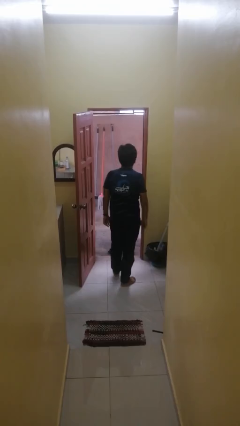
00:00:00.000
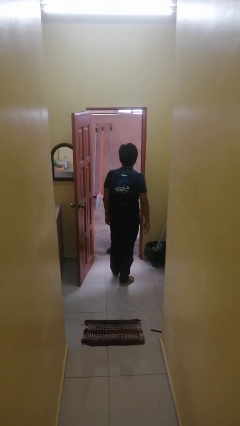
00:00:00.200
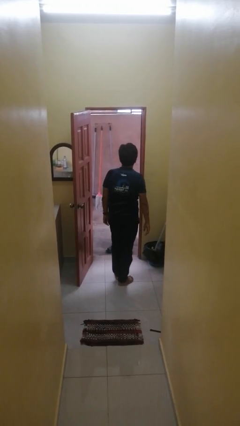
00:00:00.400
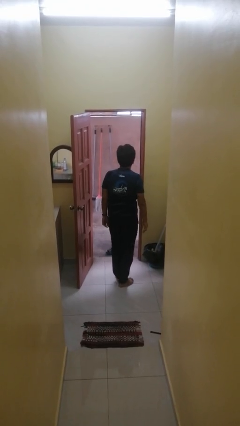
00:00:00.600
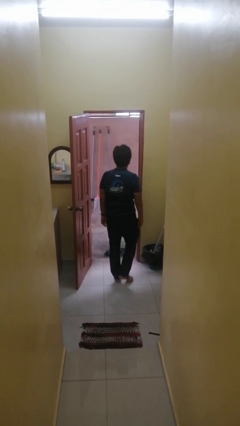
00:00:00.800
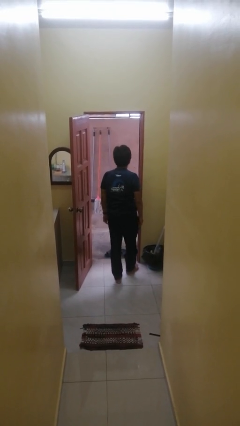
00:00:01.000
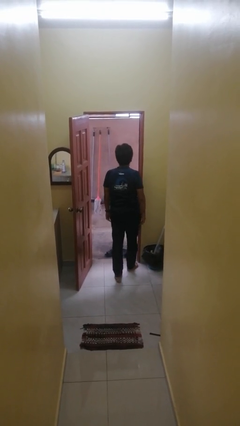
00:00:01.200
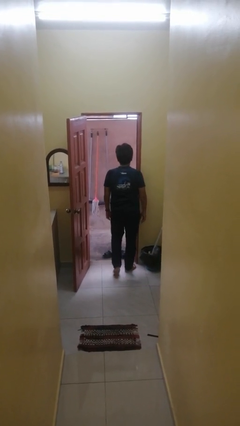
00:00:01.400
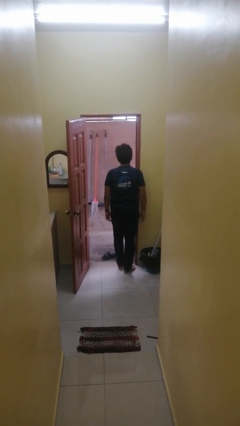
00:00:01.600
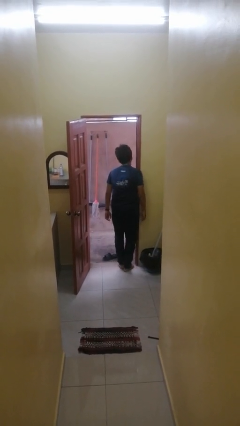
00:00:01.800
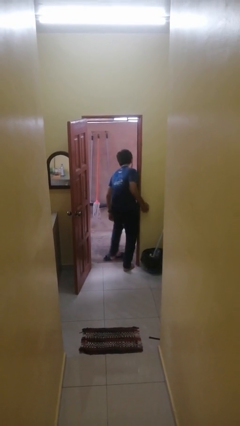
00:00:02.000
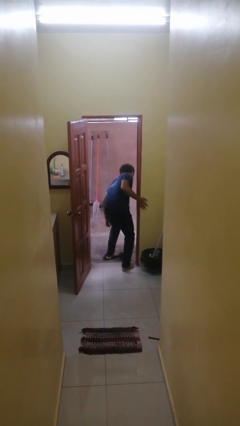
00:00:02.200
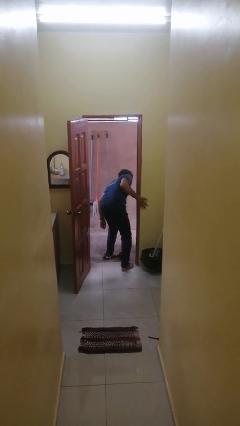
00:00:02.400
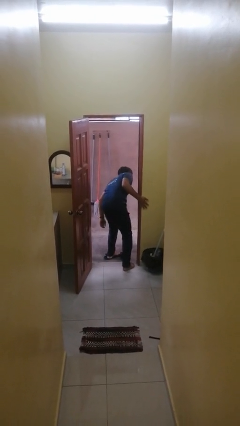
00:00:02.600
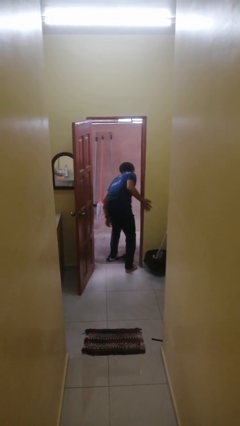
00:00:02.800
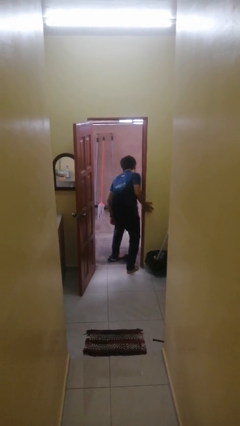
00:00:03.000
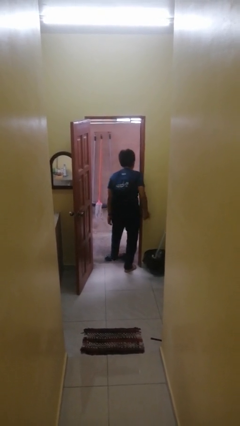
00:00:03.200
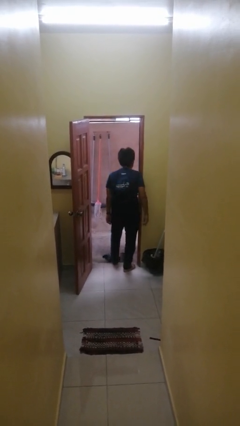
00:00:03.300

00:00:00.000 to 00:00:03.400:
person bumps into wall

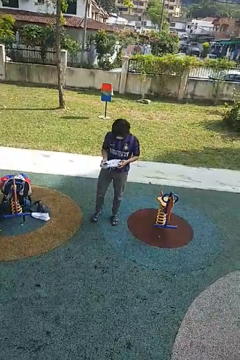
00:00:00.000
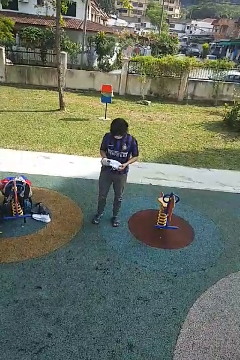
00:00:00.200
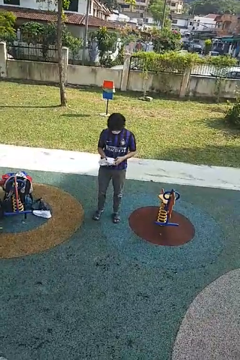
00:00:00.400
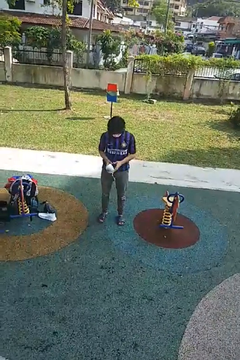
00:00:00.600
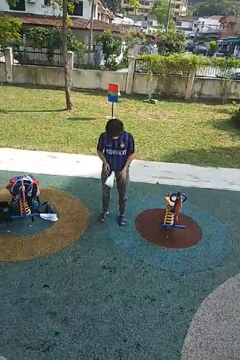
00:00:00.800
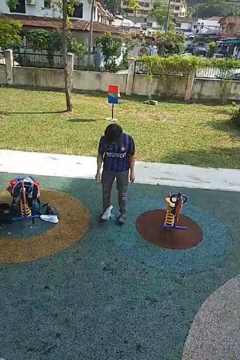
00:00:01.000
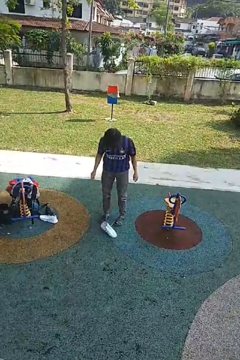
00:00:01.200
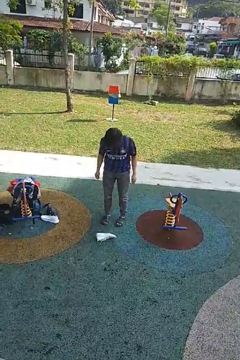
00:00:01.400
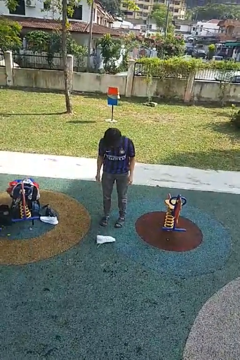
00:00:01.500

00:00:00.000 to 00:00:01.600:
person drops object

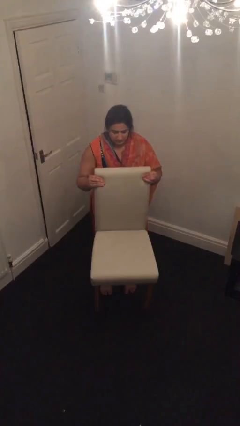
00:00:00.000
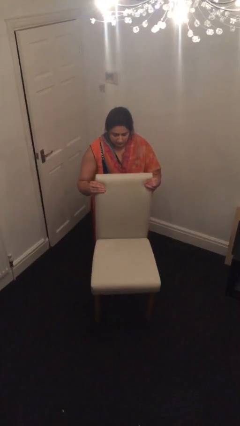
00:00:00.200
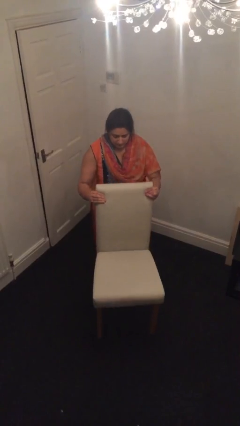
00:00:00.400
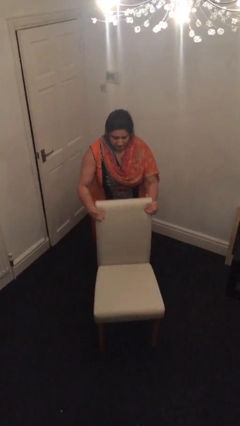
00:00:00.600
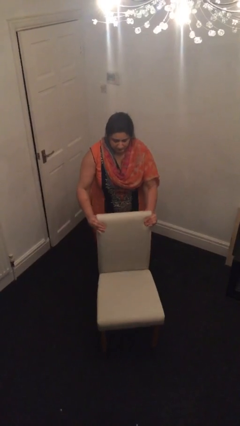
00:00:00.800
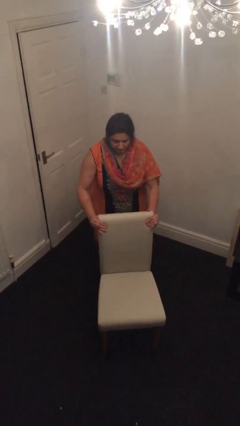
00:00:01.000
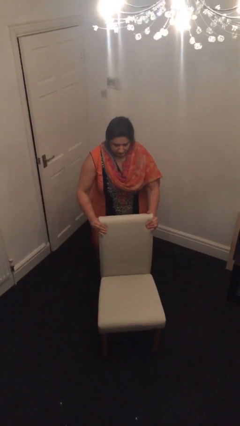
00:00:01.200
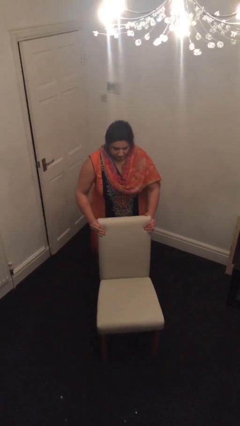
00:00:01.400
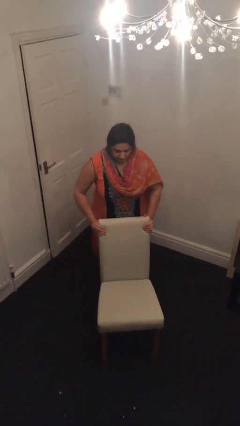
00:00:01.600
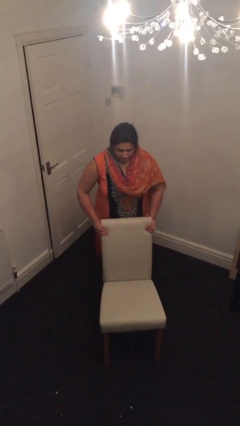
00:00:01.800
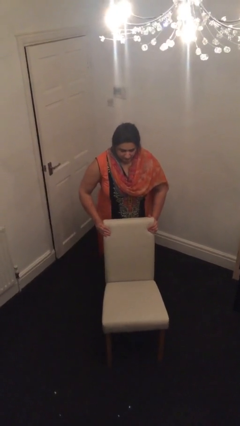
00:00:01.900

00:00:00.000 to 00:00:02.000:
person puts down object on floor

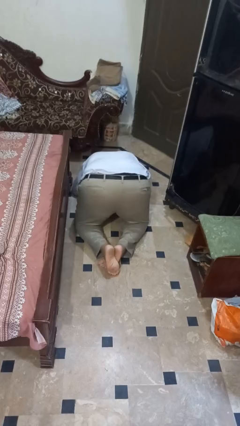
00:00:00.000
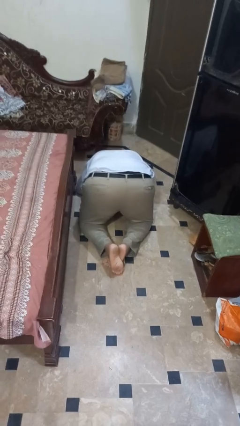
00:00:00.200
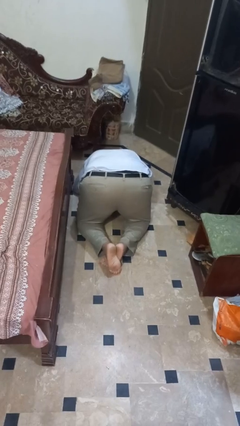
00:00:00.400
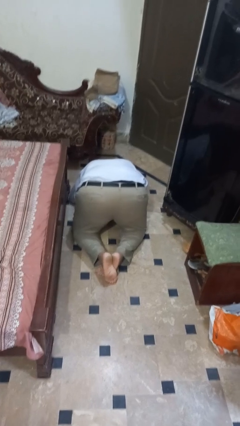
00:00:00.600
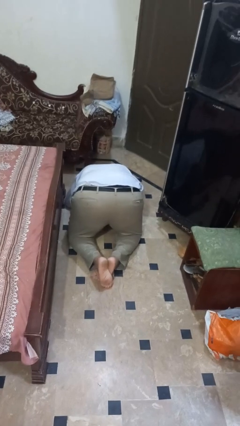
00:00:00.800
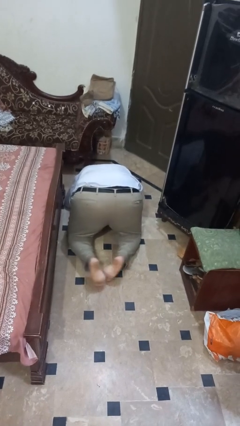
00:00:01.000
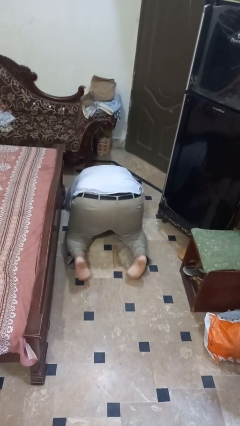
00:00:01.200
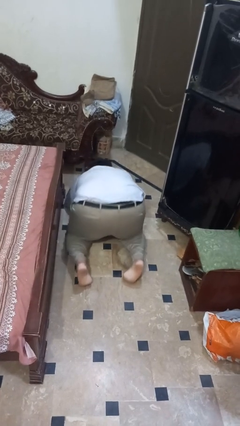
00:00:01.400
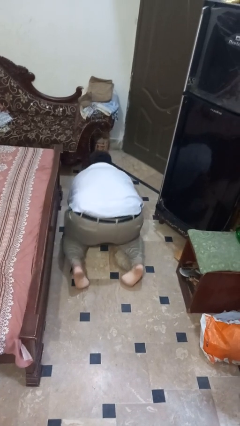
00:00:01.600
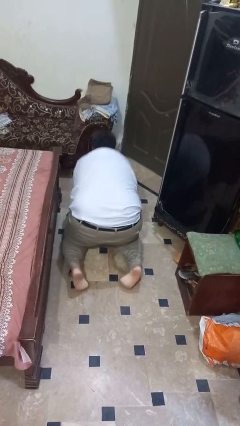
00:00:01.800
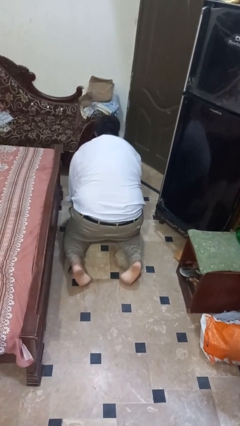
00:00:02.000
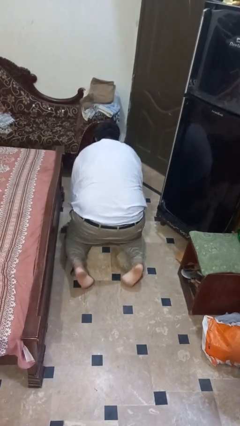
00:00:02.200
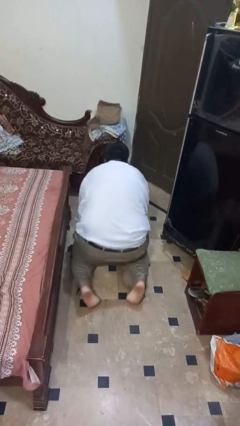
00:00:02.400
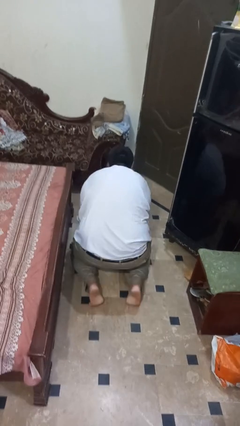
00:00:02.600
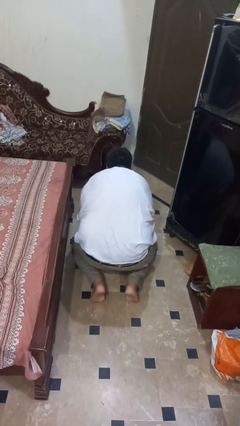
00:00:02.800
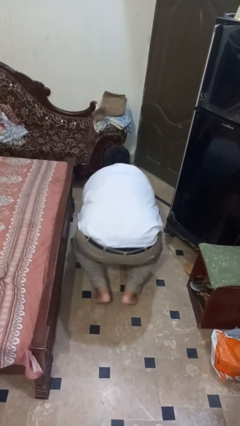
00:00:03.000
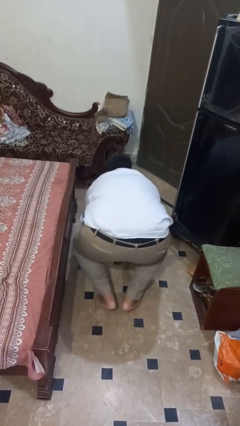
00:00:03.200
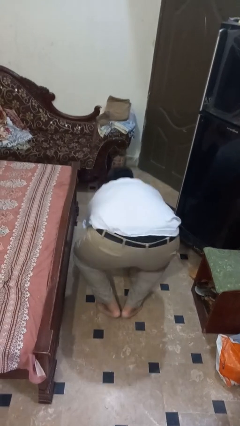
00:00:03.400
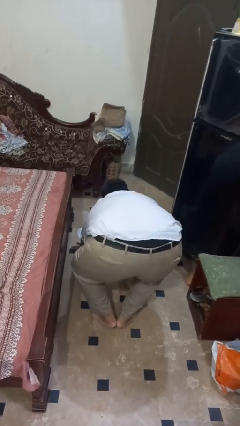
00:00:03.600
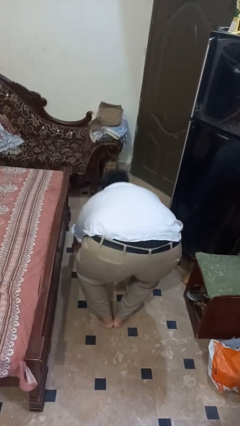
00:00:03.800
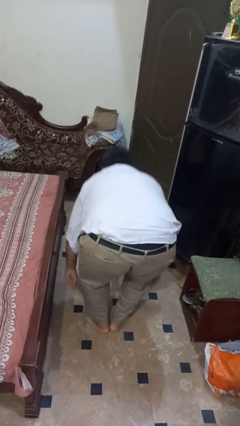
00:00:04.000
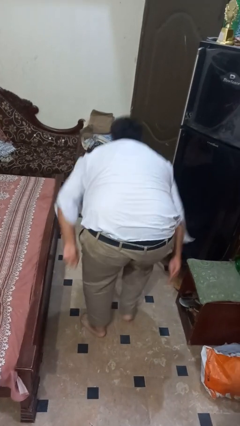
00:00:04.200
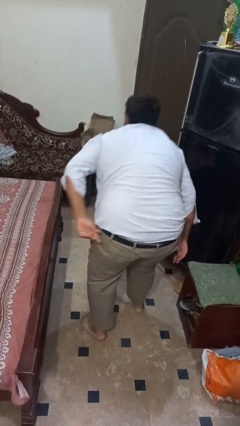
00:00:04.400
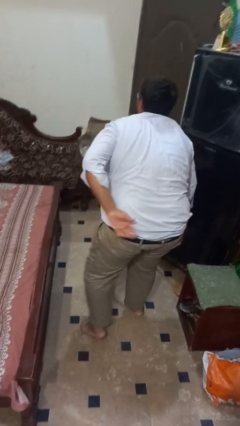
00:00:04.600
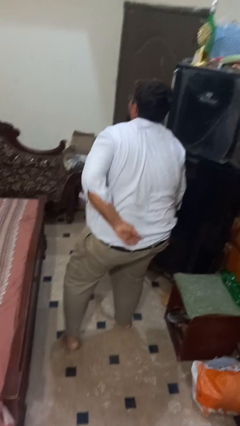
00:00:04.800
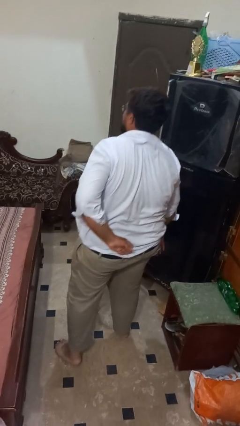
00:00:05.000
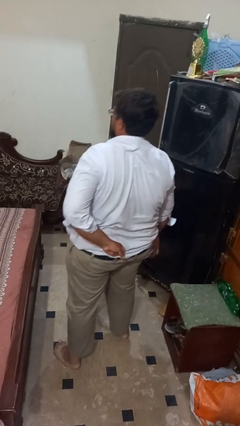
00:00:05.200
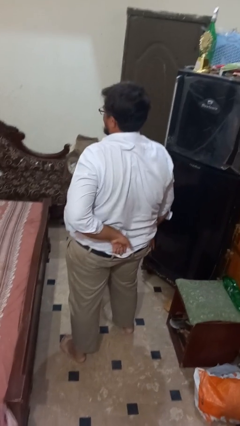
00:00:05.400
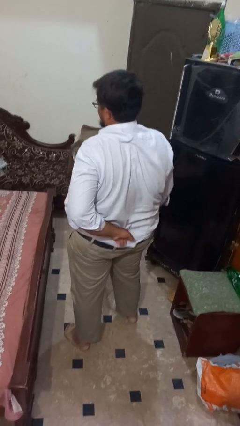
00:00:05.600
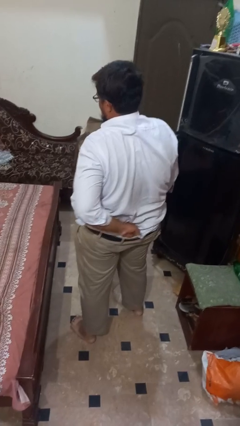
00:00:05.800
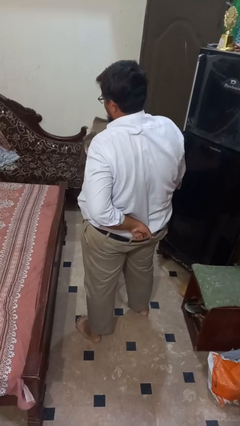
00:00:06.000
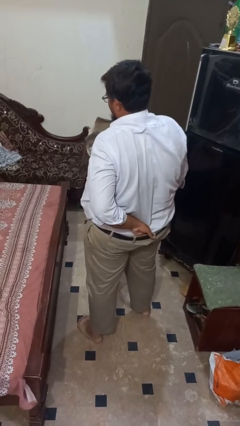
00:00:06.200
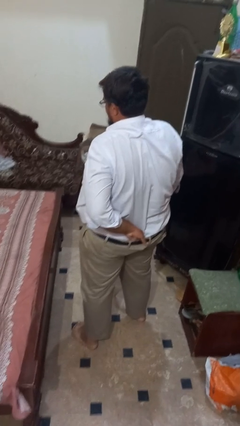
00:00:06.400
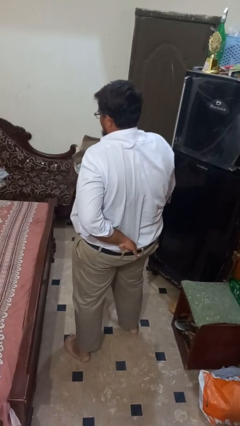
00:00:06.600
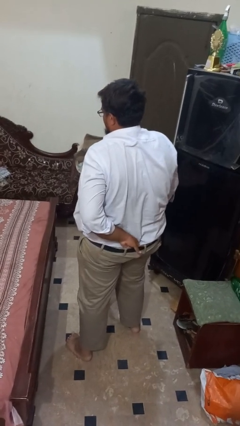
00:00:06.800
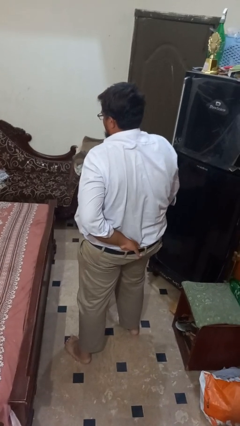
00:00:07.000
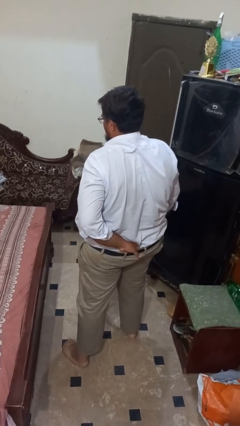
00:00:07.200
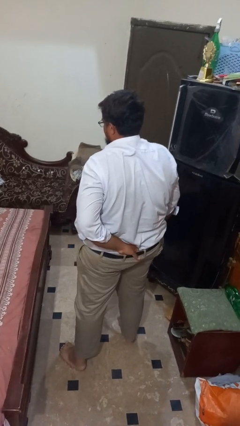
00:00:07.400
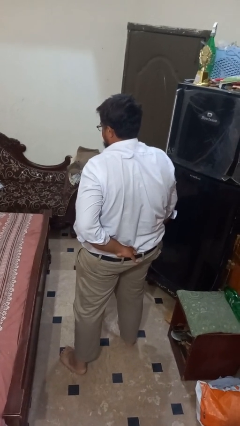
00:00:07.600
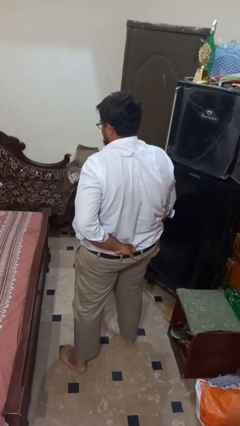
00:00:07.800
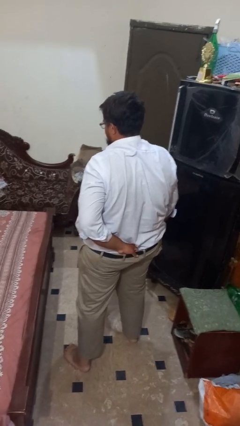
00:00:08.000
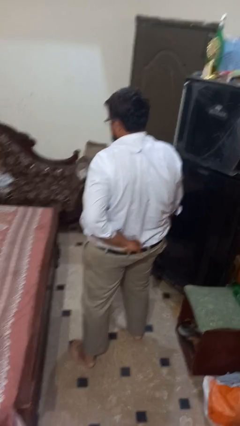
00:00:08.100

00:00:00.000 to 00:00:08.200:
person stands up from floor

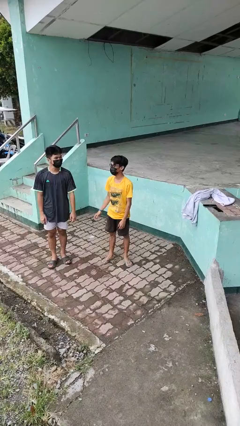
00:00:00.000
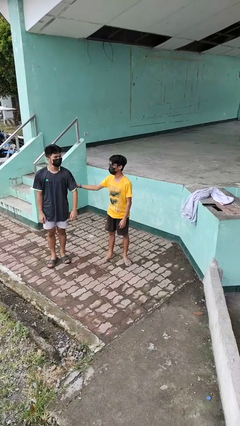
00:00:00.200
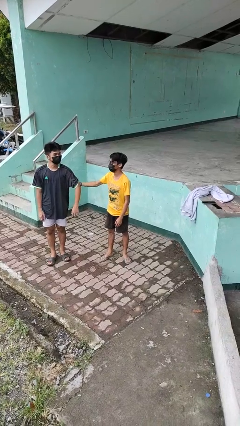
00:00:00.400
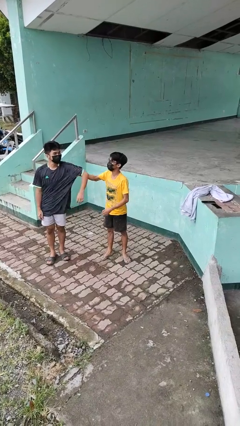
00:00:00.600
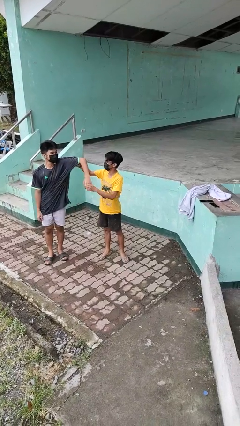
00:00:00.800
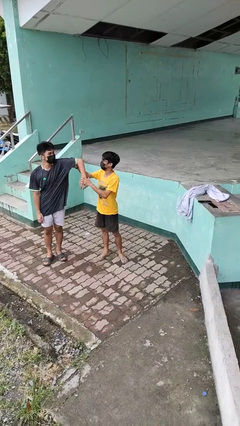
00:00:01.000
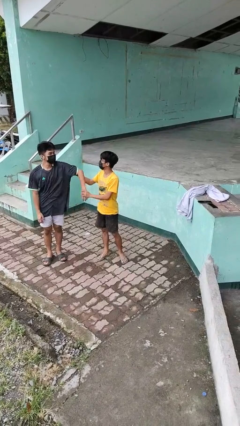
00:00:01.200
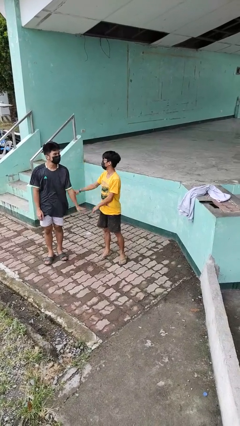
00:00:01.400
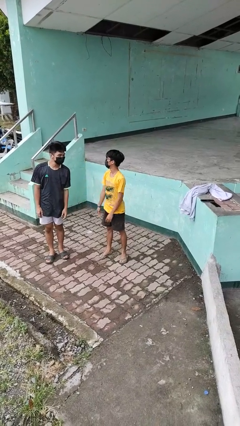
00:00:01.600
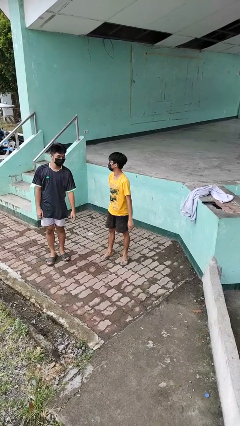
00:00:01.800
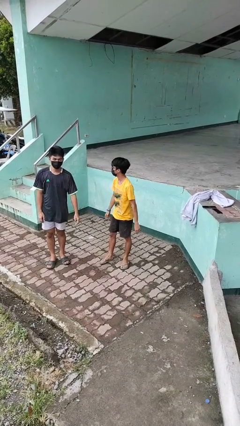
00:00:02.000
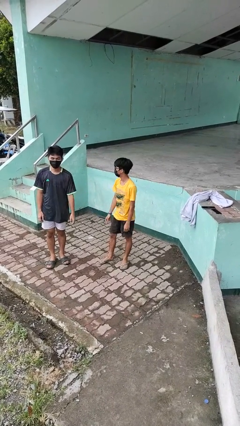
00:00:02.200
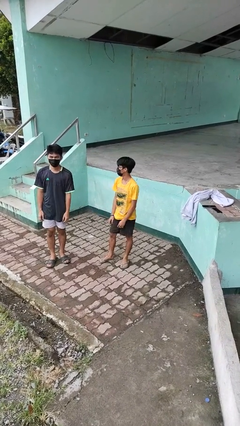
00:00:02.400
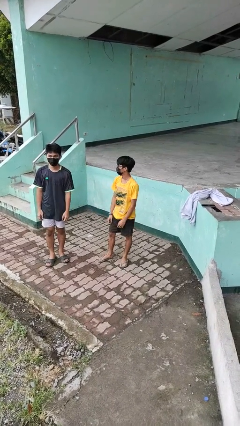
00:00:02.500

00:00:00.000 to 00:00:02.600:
person grabs person by bicep
